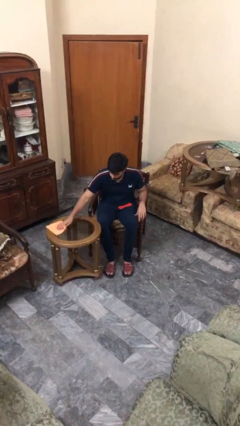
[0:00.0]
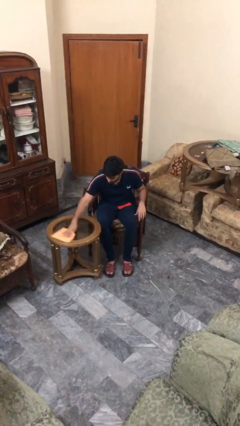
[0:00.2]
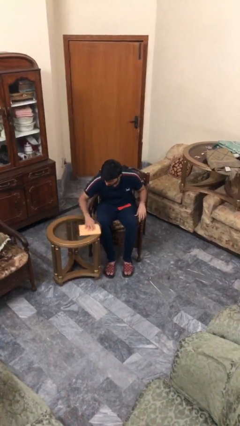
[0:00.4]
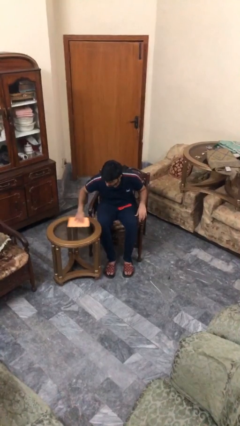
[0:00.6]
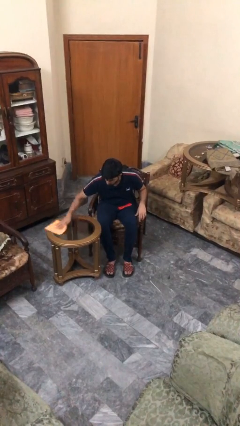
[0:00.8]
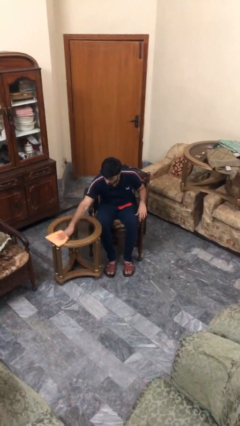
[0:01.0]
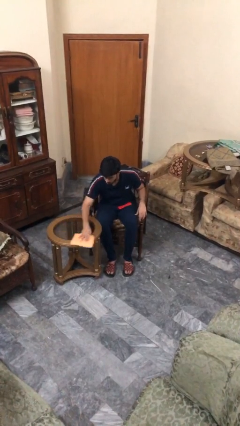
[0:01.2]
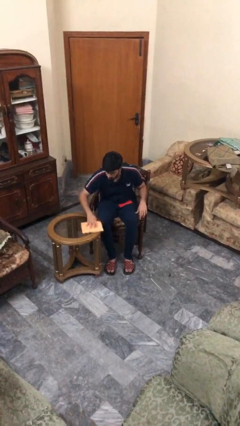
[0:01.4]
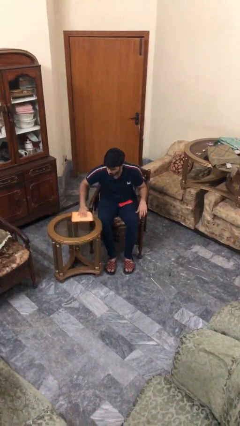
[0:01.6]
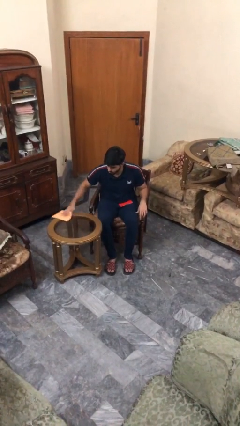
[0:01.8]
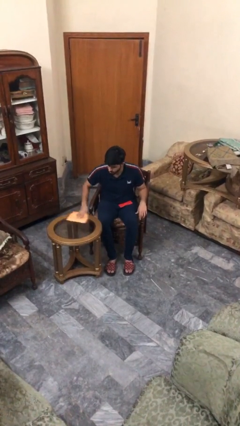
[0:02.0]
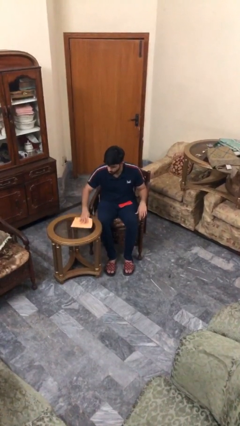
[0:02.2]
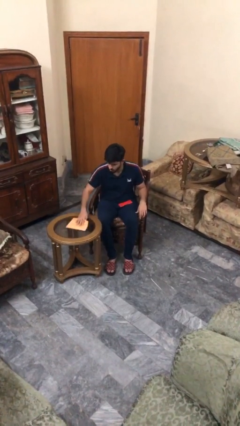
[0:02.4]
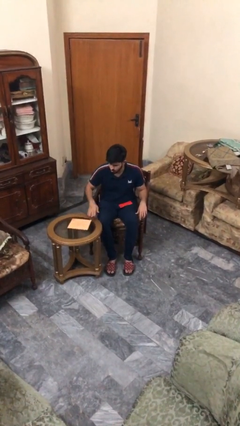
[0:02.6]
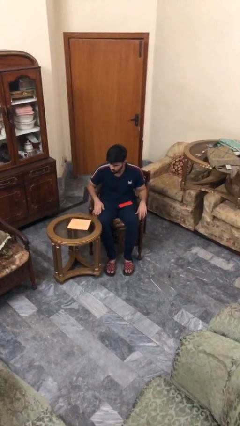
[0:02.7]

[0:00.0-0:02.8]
person cleans table with rag

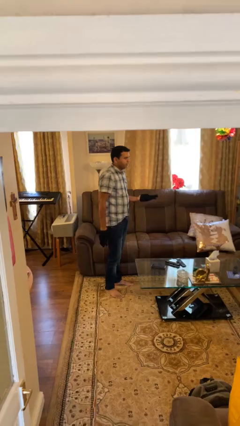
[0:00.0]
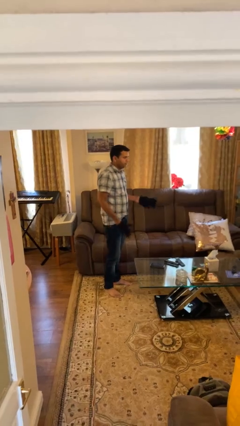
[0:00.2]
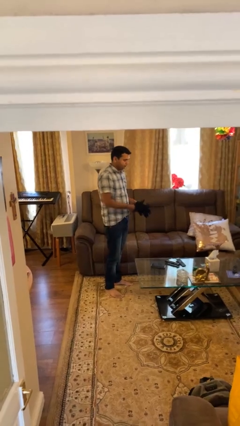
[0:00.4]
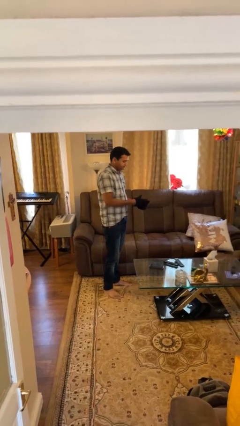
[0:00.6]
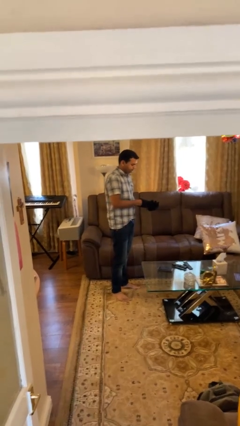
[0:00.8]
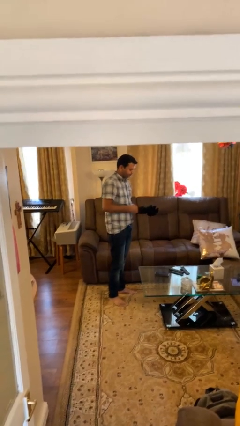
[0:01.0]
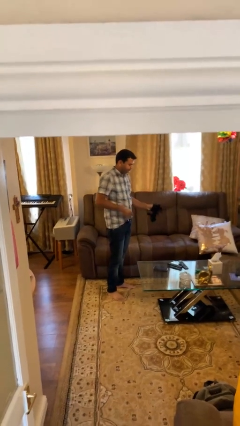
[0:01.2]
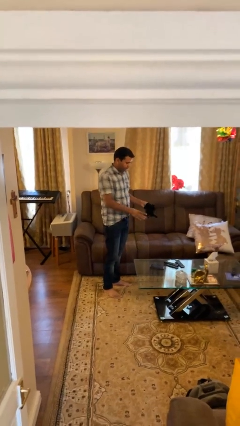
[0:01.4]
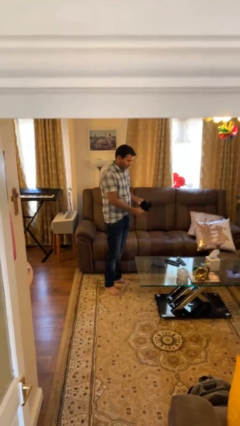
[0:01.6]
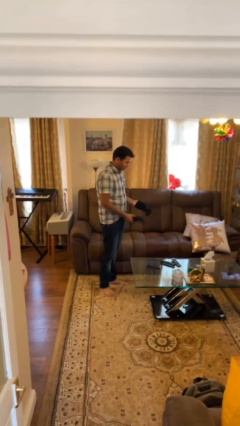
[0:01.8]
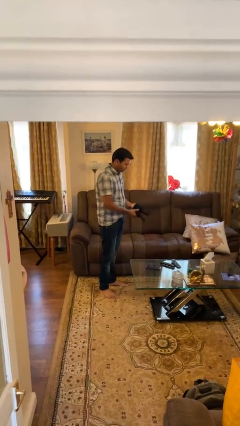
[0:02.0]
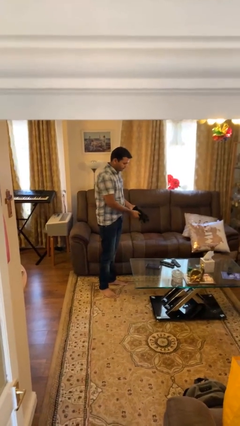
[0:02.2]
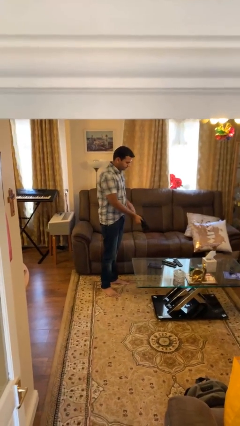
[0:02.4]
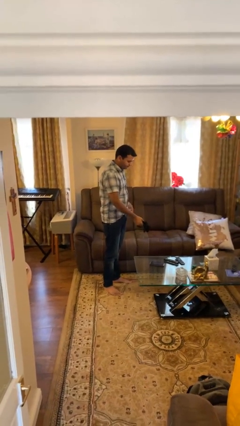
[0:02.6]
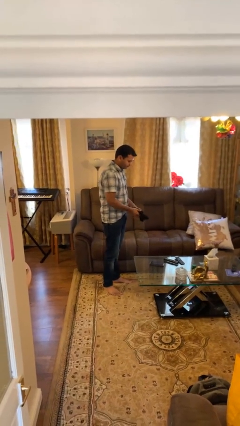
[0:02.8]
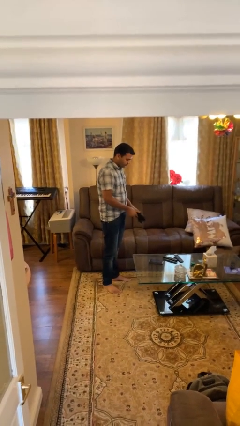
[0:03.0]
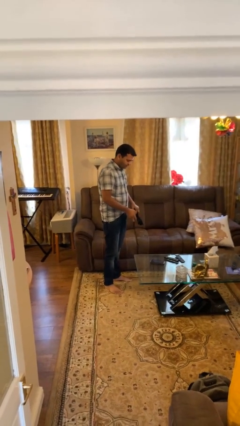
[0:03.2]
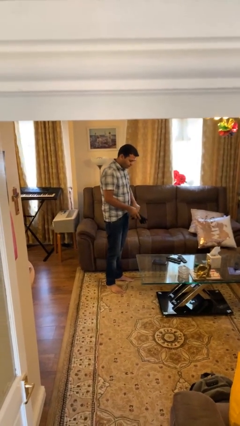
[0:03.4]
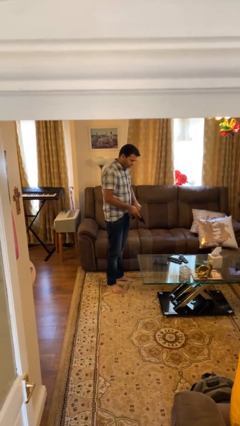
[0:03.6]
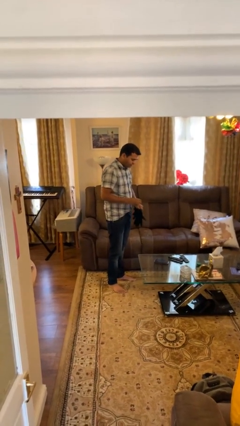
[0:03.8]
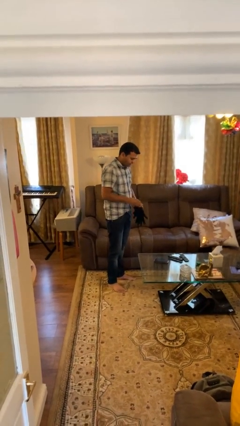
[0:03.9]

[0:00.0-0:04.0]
person takes off gloves

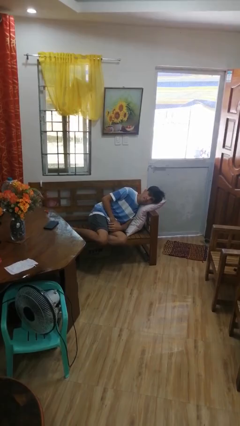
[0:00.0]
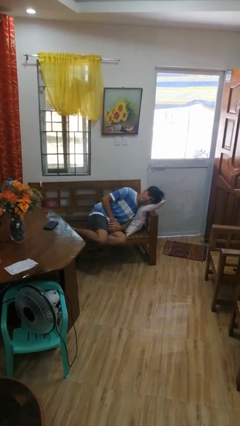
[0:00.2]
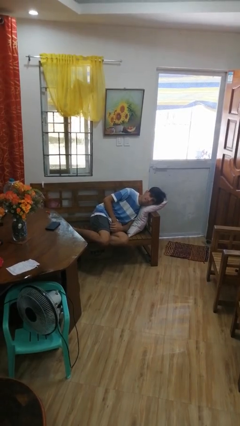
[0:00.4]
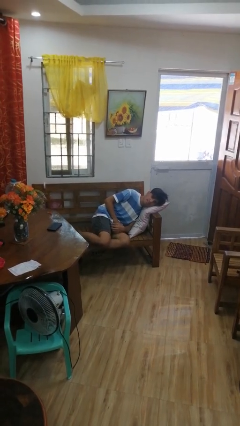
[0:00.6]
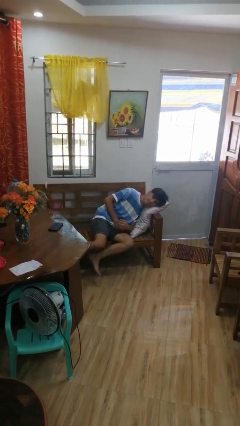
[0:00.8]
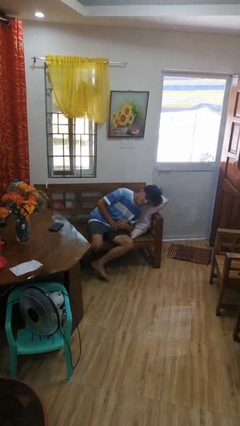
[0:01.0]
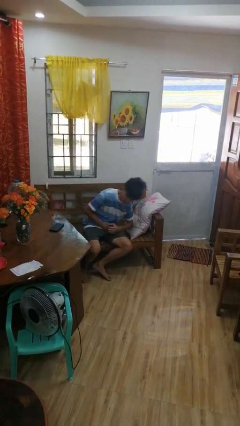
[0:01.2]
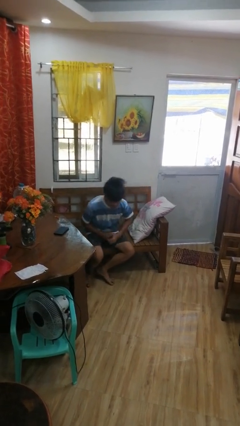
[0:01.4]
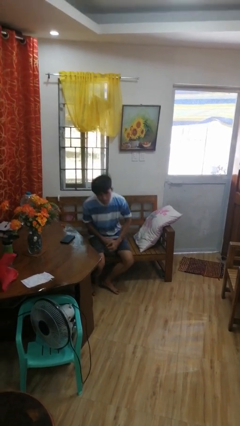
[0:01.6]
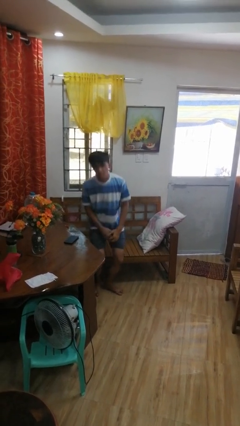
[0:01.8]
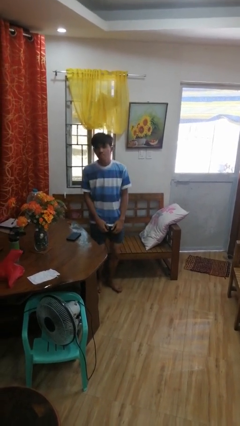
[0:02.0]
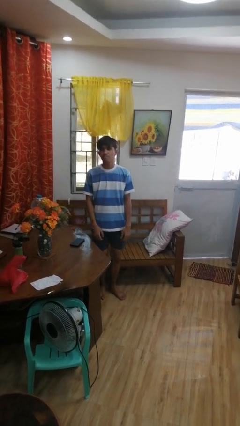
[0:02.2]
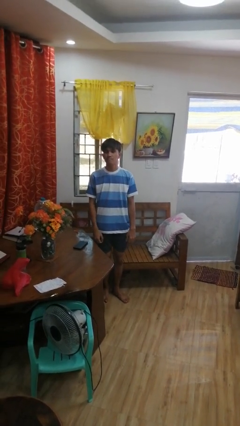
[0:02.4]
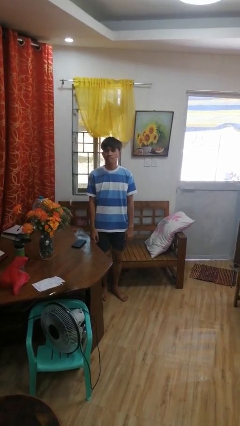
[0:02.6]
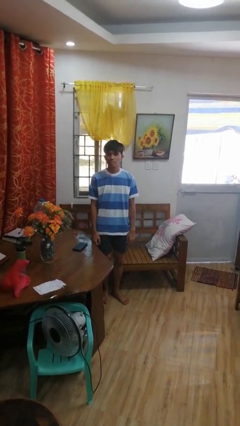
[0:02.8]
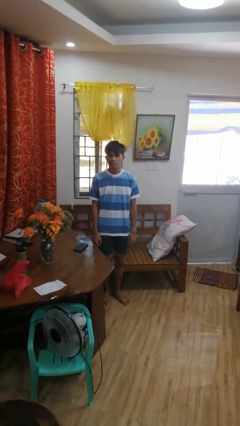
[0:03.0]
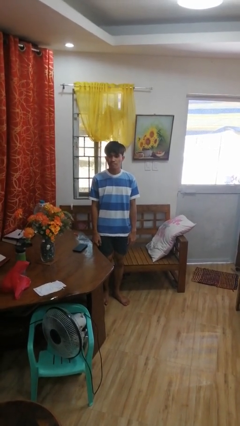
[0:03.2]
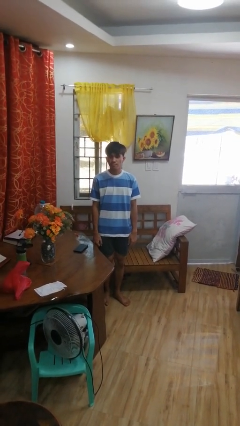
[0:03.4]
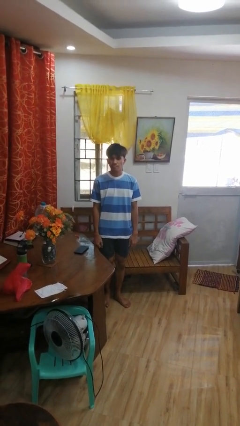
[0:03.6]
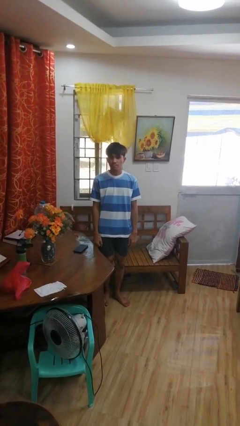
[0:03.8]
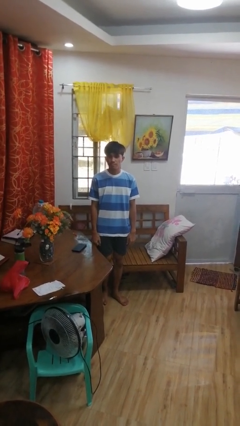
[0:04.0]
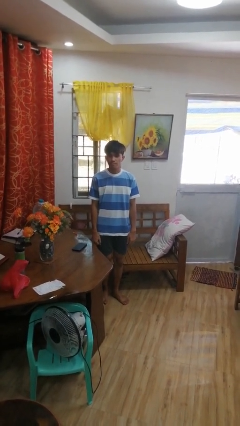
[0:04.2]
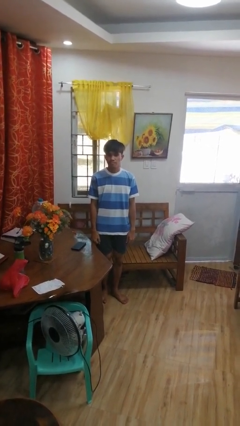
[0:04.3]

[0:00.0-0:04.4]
person stands up

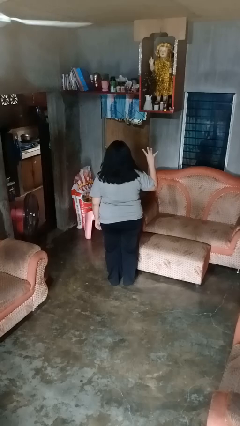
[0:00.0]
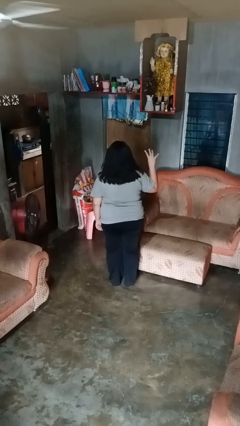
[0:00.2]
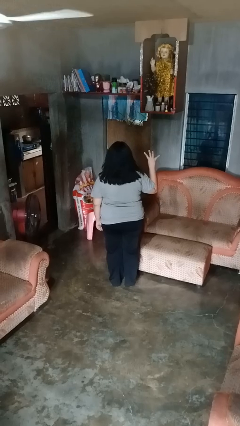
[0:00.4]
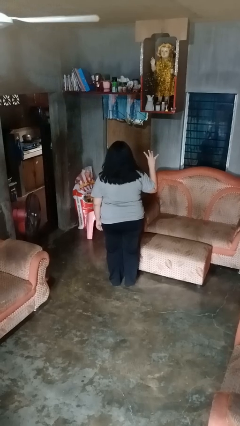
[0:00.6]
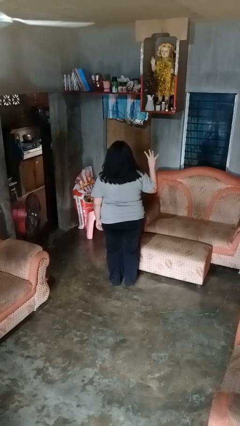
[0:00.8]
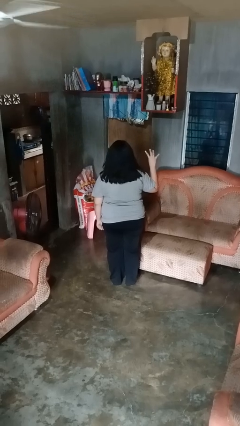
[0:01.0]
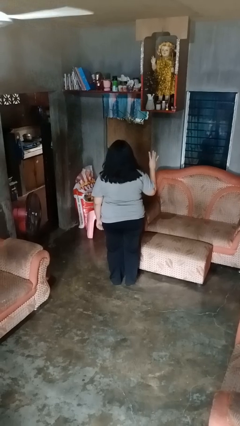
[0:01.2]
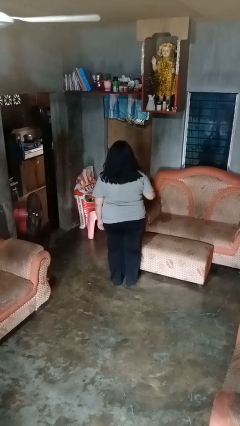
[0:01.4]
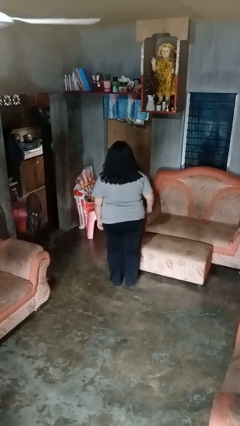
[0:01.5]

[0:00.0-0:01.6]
person gestures number four

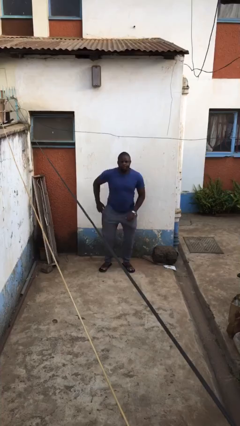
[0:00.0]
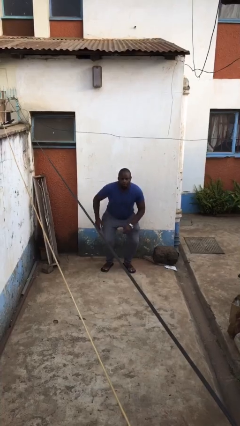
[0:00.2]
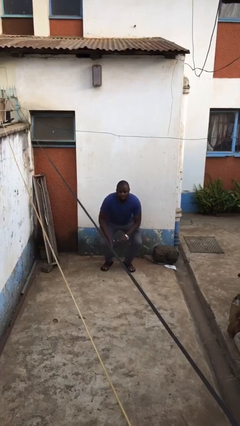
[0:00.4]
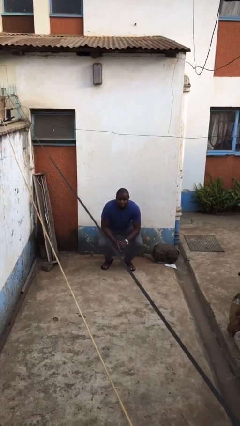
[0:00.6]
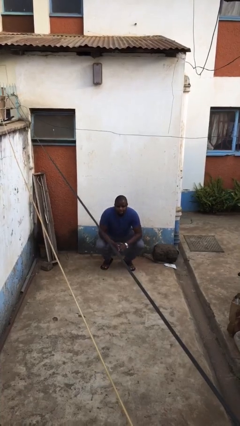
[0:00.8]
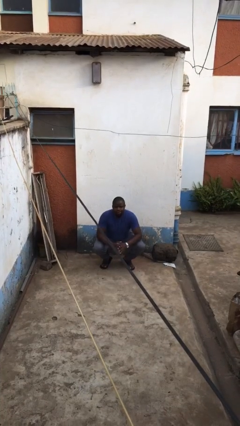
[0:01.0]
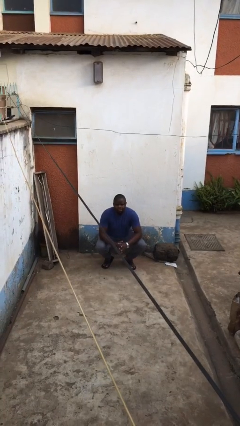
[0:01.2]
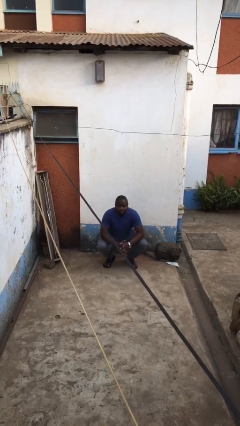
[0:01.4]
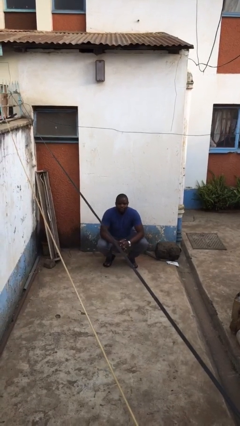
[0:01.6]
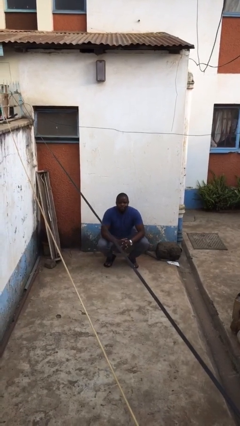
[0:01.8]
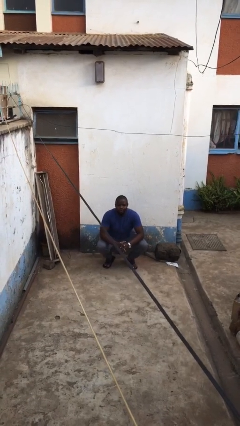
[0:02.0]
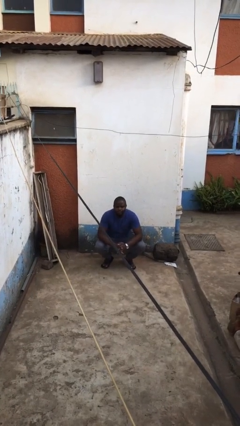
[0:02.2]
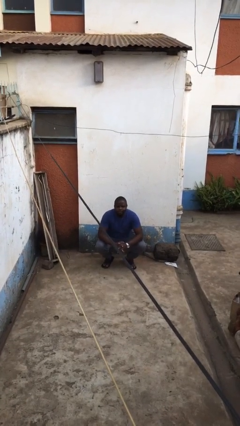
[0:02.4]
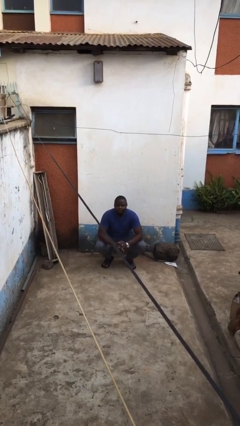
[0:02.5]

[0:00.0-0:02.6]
person squats

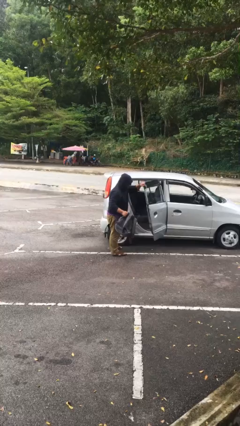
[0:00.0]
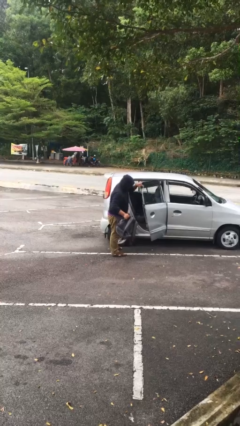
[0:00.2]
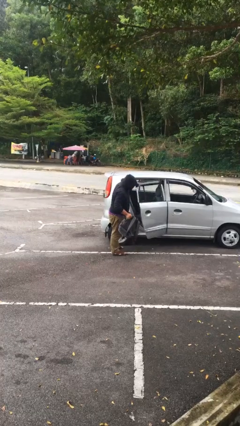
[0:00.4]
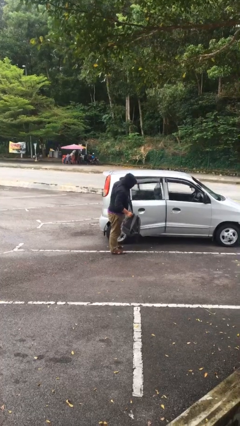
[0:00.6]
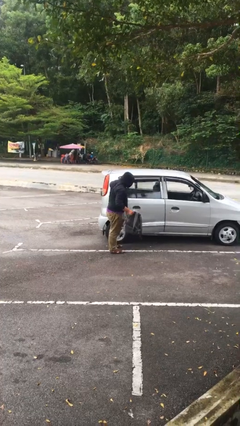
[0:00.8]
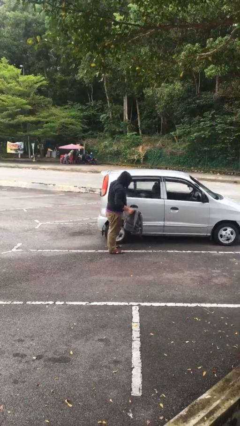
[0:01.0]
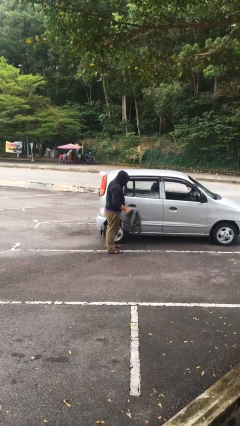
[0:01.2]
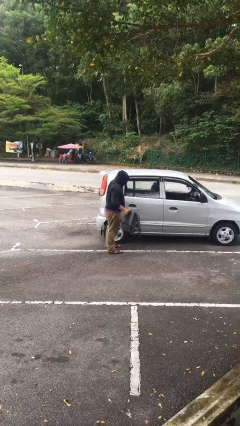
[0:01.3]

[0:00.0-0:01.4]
person closes car door

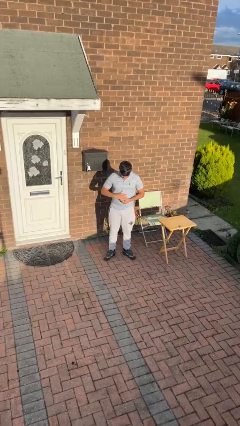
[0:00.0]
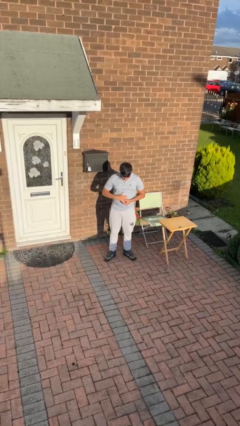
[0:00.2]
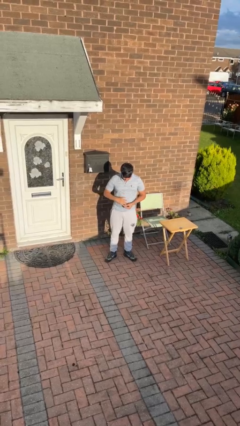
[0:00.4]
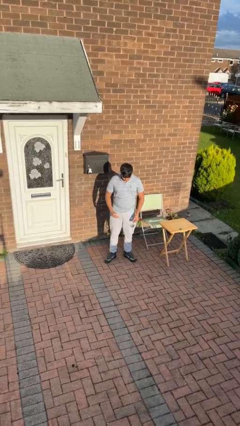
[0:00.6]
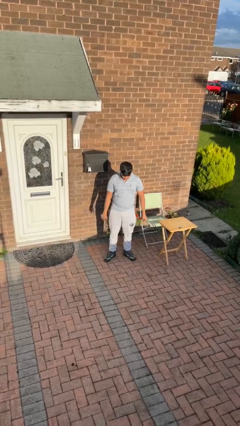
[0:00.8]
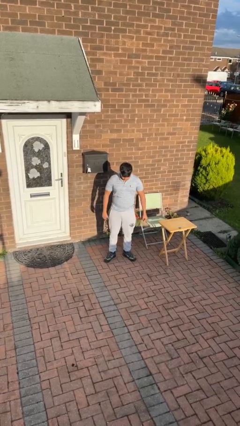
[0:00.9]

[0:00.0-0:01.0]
person takes off ring
